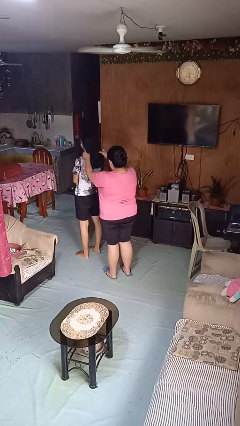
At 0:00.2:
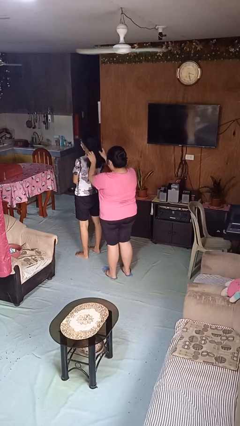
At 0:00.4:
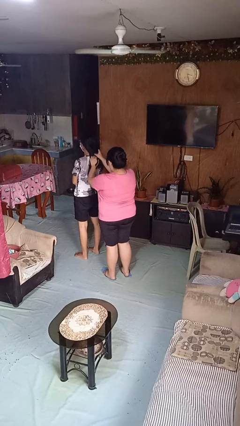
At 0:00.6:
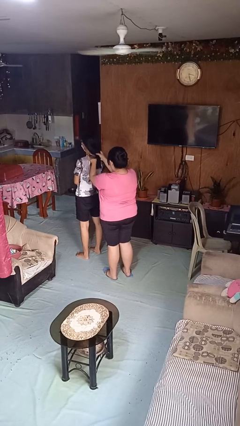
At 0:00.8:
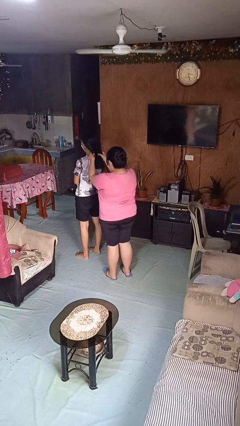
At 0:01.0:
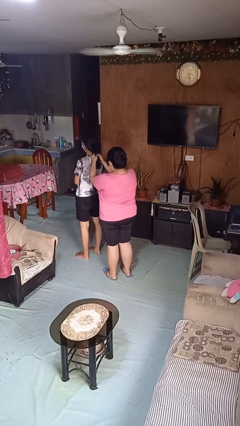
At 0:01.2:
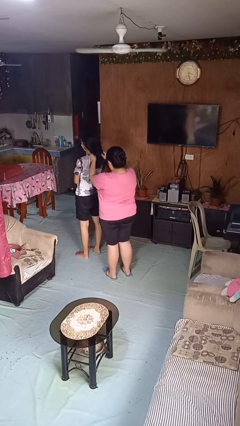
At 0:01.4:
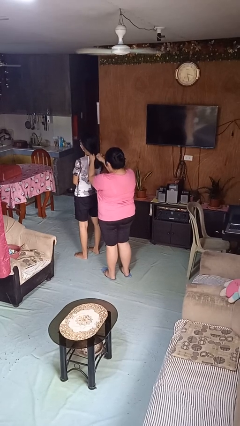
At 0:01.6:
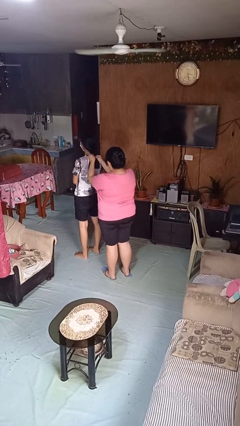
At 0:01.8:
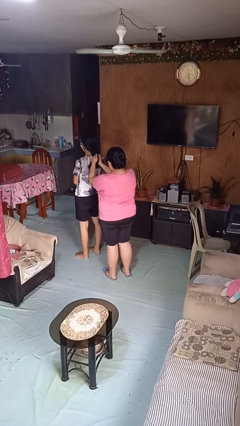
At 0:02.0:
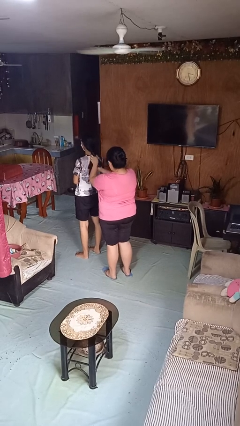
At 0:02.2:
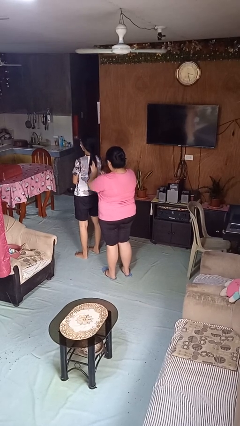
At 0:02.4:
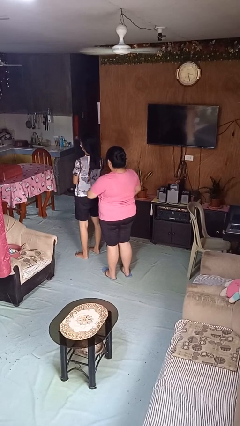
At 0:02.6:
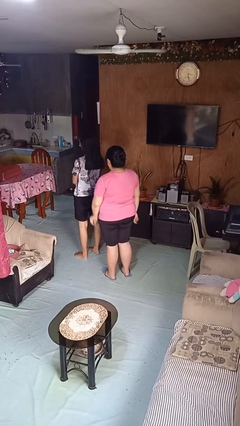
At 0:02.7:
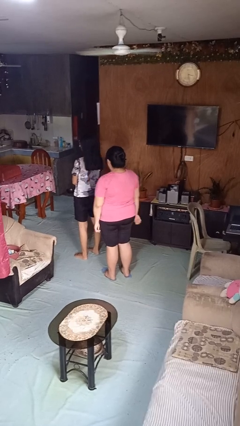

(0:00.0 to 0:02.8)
person braids hair of person

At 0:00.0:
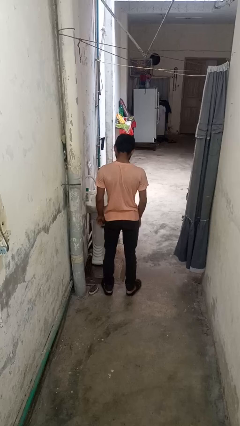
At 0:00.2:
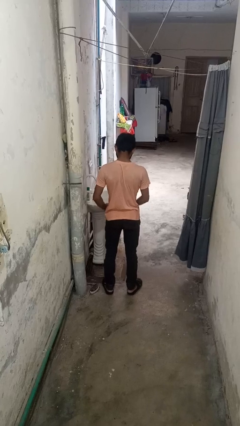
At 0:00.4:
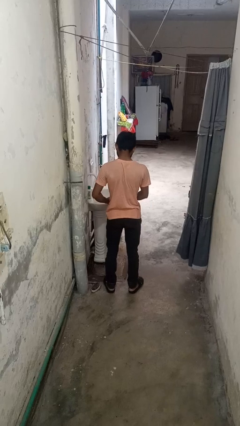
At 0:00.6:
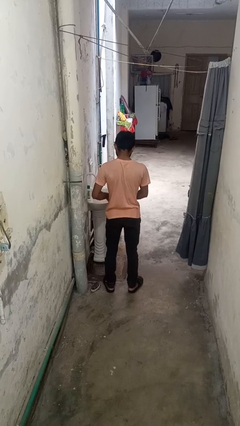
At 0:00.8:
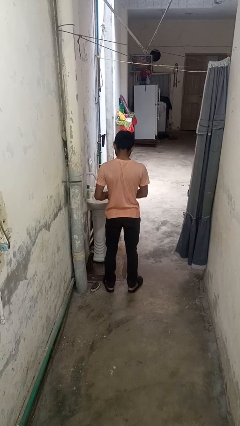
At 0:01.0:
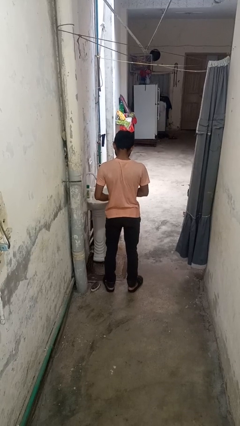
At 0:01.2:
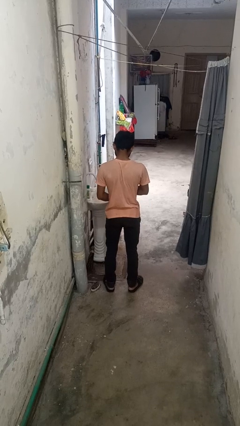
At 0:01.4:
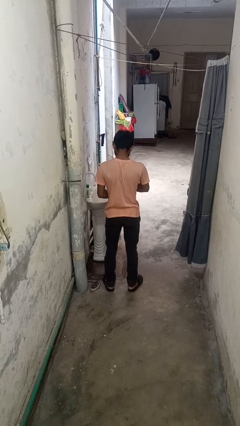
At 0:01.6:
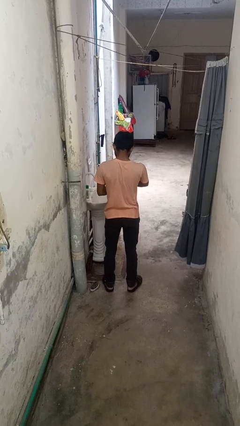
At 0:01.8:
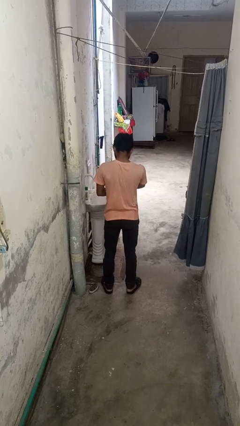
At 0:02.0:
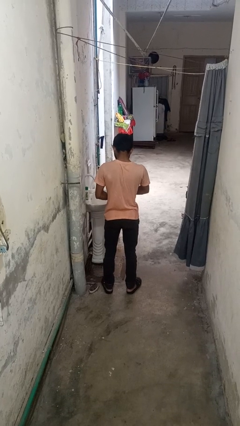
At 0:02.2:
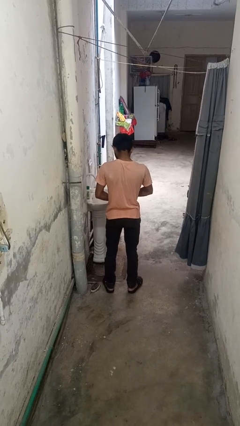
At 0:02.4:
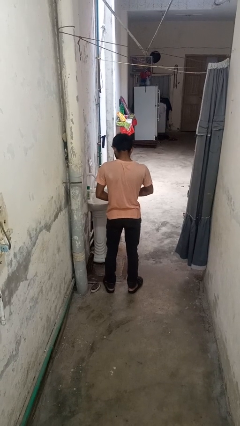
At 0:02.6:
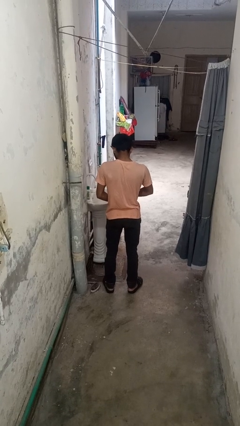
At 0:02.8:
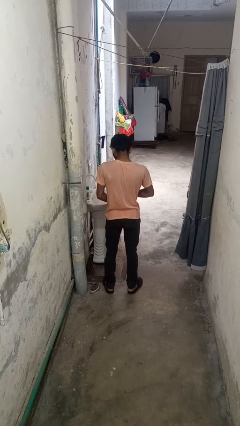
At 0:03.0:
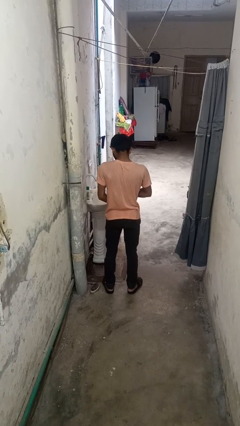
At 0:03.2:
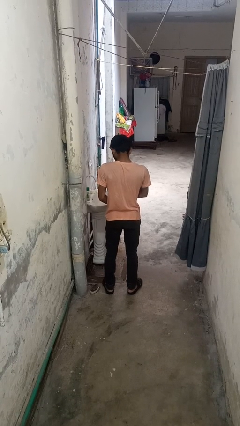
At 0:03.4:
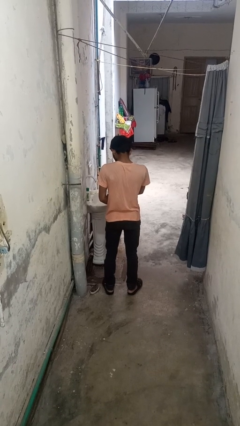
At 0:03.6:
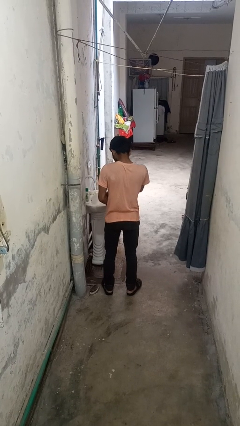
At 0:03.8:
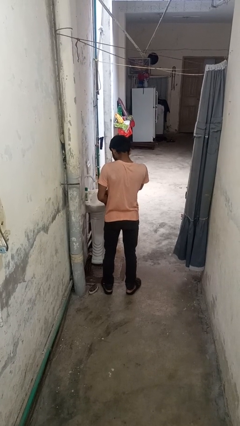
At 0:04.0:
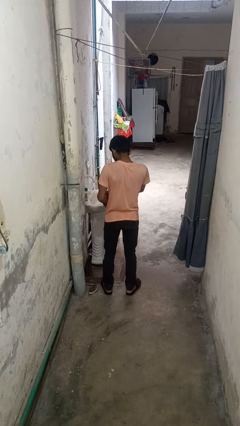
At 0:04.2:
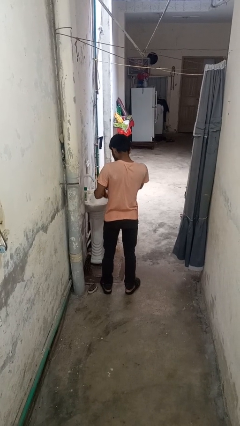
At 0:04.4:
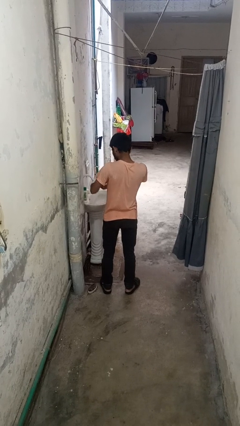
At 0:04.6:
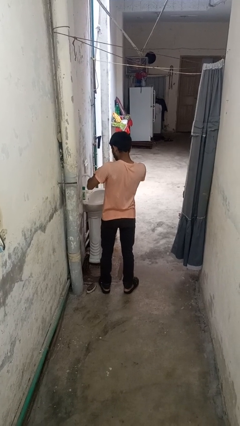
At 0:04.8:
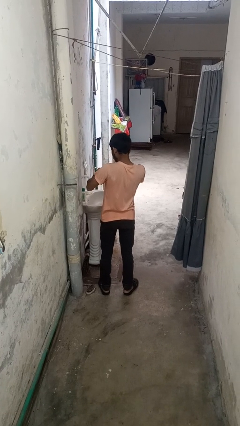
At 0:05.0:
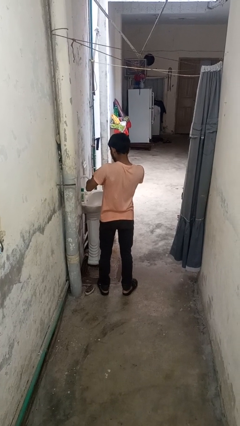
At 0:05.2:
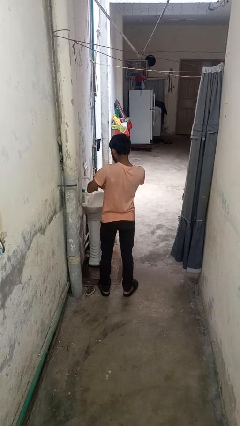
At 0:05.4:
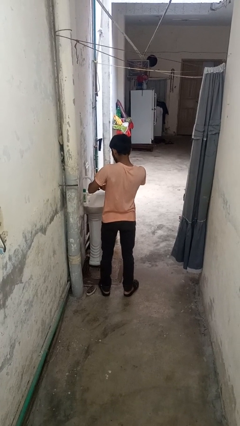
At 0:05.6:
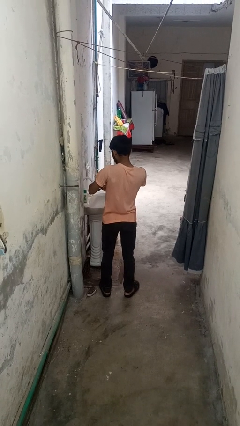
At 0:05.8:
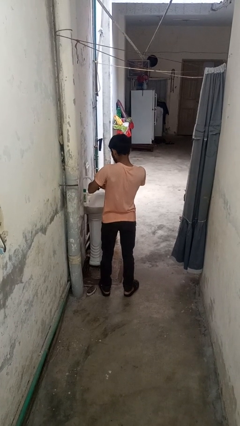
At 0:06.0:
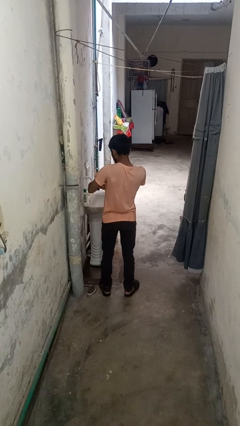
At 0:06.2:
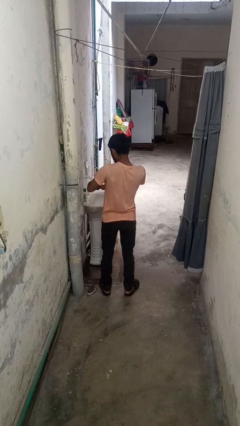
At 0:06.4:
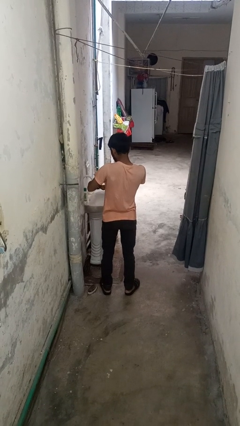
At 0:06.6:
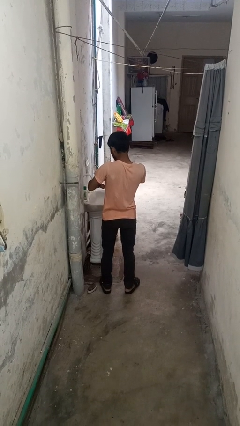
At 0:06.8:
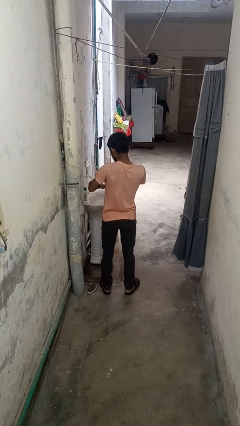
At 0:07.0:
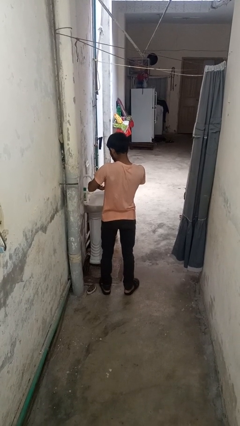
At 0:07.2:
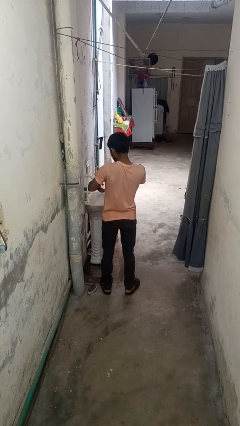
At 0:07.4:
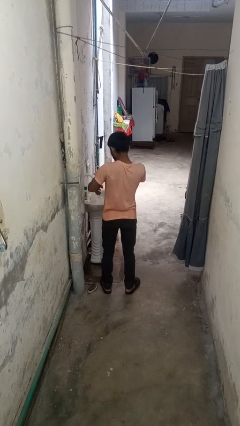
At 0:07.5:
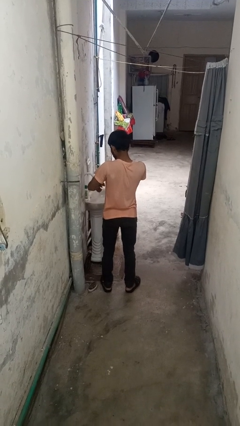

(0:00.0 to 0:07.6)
person puts on wristwatch

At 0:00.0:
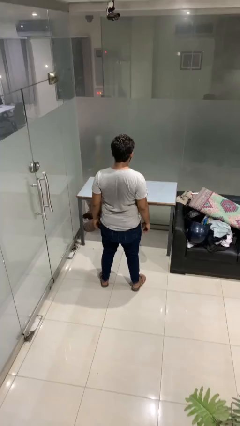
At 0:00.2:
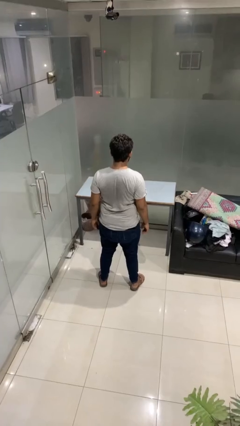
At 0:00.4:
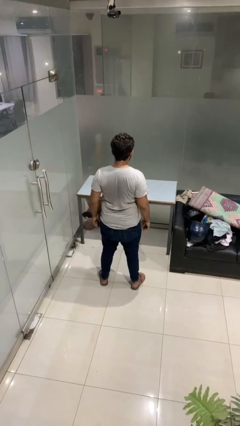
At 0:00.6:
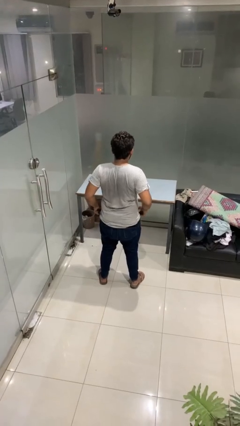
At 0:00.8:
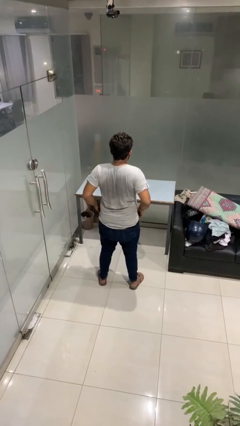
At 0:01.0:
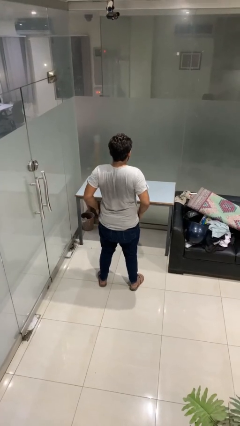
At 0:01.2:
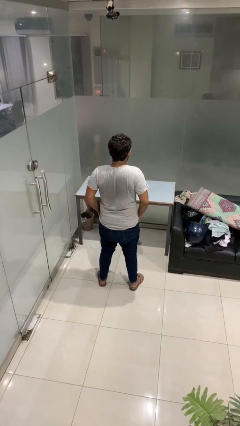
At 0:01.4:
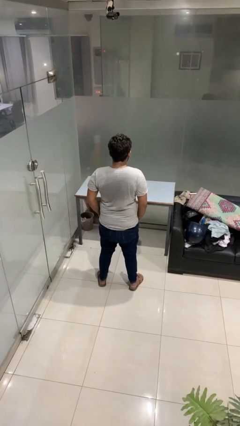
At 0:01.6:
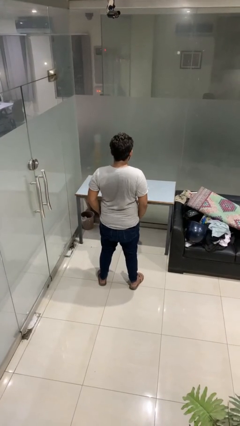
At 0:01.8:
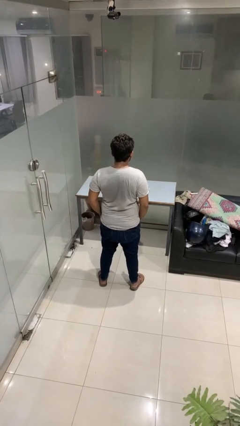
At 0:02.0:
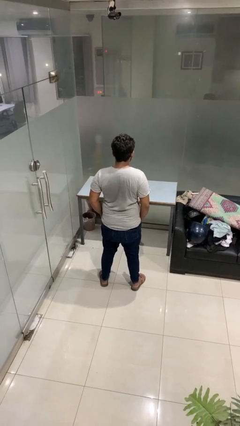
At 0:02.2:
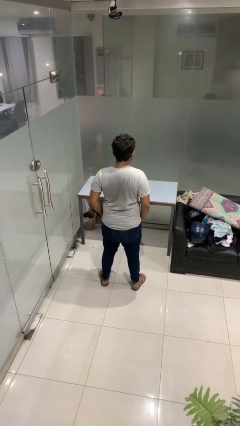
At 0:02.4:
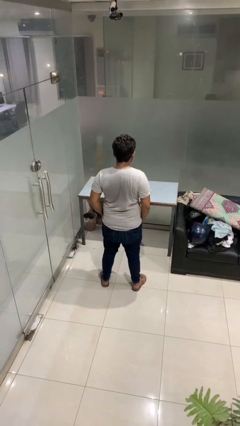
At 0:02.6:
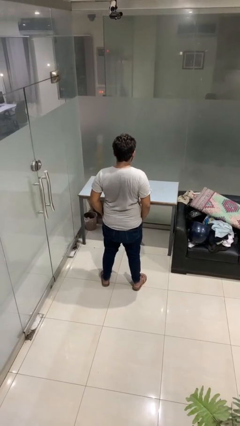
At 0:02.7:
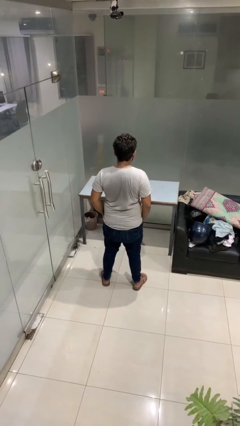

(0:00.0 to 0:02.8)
person puts hands in back pockets

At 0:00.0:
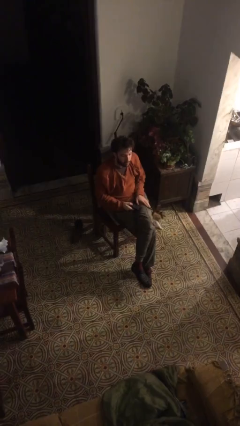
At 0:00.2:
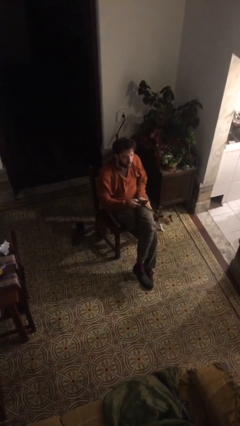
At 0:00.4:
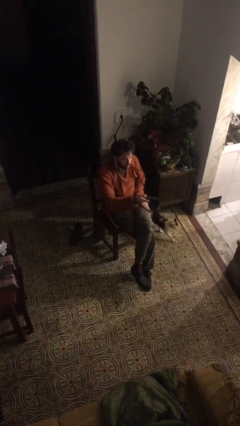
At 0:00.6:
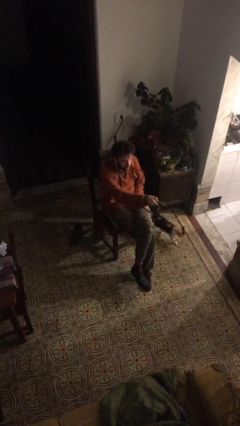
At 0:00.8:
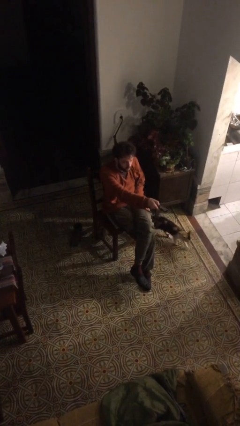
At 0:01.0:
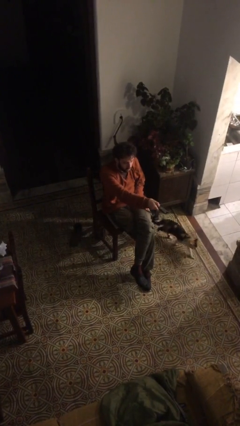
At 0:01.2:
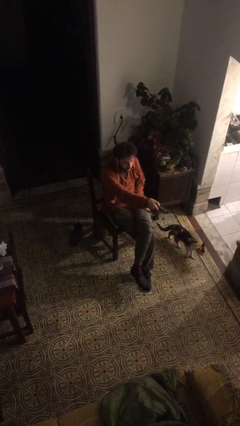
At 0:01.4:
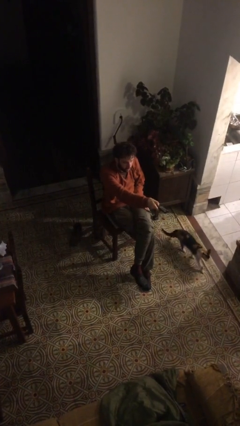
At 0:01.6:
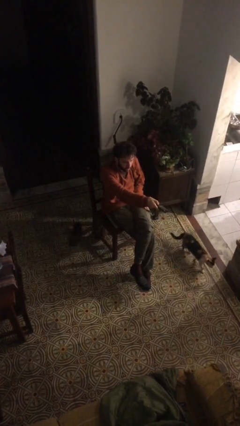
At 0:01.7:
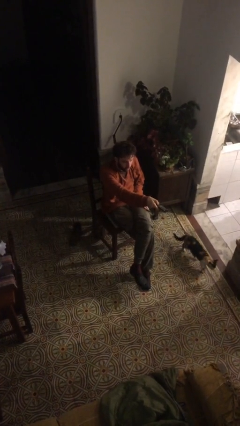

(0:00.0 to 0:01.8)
person uses television remote

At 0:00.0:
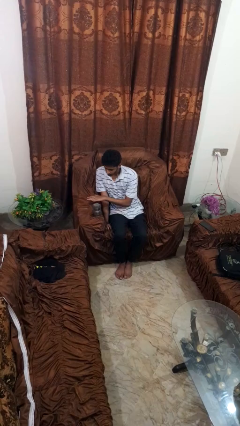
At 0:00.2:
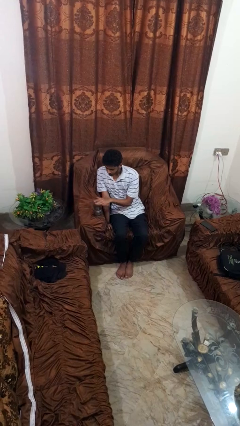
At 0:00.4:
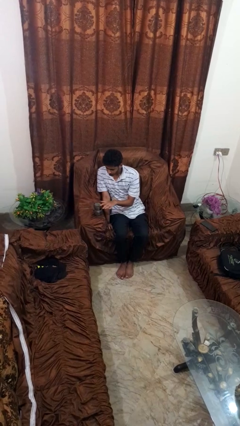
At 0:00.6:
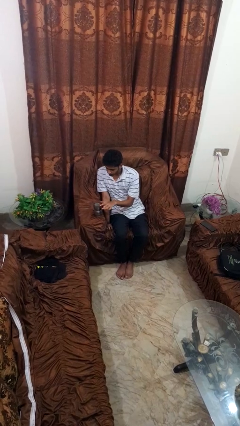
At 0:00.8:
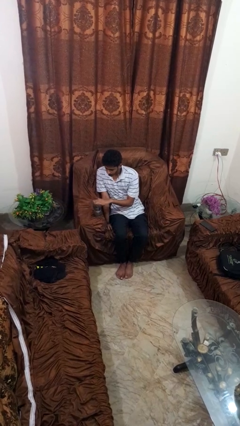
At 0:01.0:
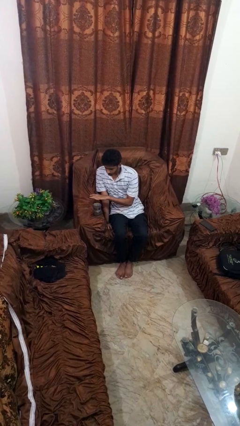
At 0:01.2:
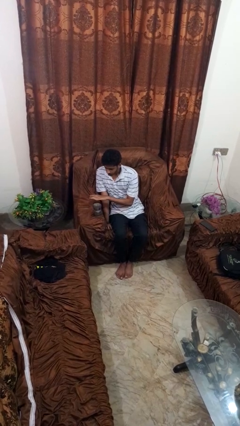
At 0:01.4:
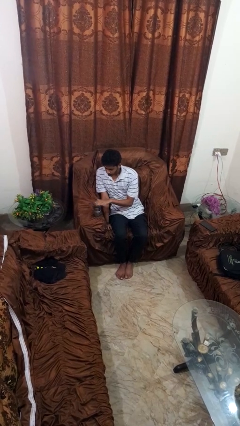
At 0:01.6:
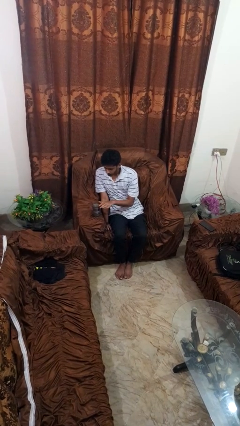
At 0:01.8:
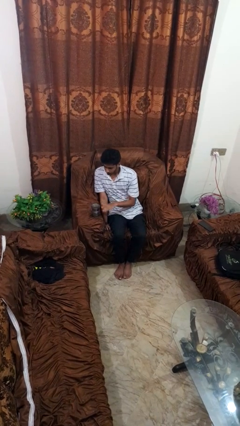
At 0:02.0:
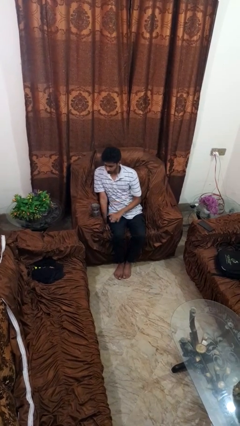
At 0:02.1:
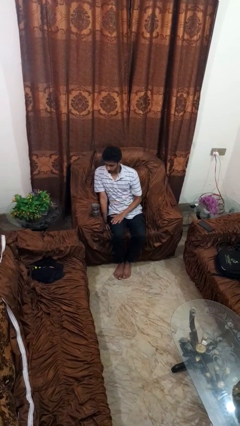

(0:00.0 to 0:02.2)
person waves hand over object

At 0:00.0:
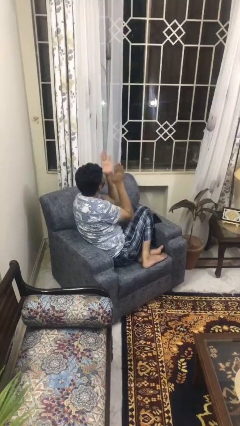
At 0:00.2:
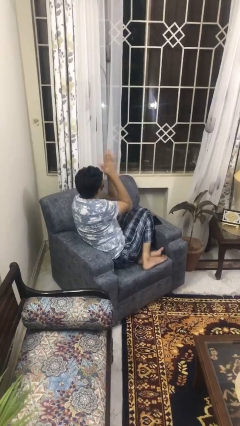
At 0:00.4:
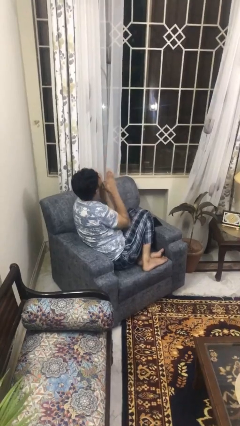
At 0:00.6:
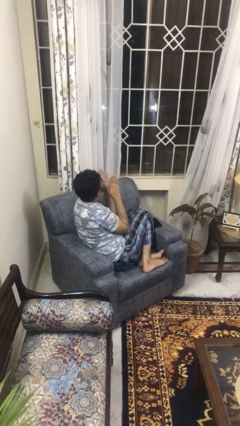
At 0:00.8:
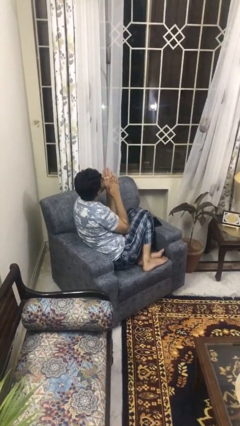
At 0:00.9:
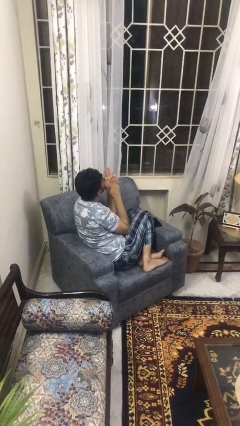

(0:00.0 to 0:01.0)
person swats bug
